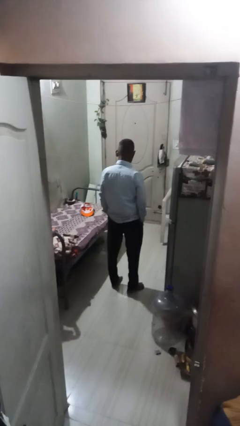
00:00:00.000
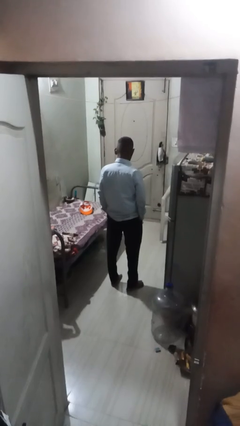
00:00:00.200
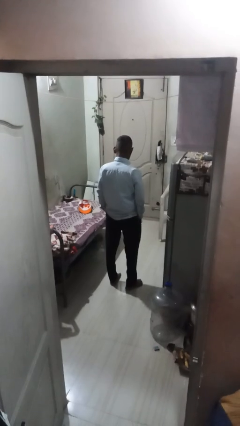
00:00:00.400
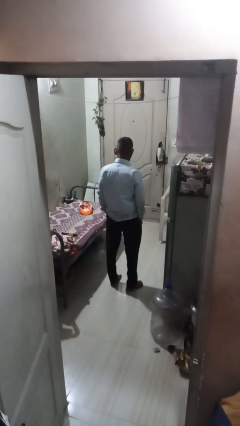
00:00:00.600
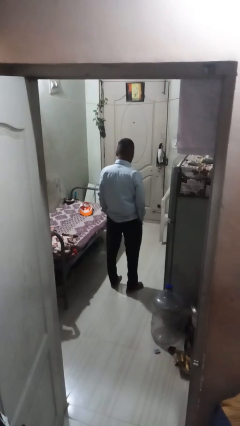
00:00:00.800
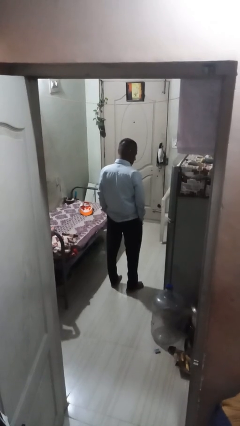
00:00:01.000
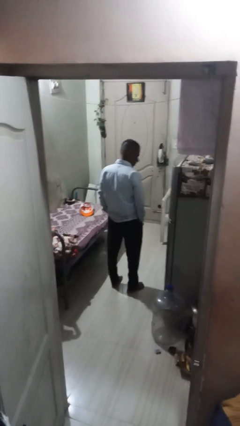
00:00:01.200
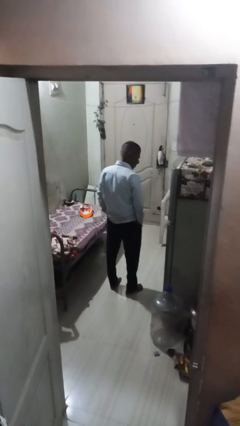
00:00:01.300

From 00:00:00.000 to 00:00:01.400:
person puts hands in back pockets

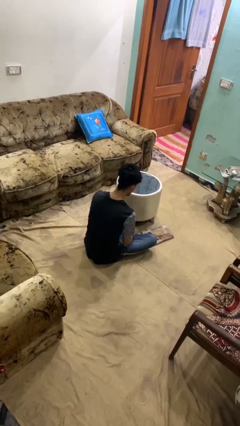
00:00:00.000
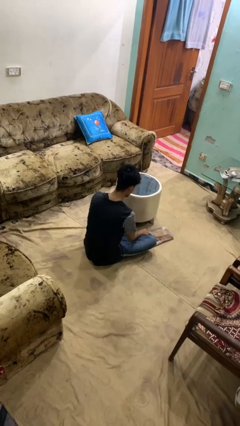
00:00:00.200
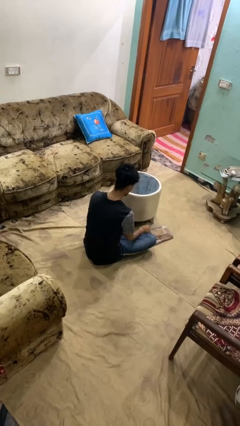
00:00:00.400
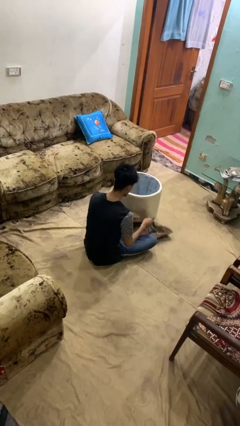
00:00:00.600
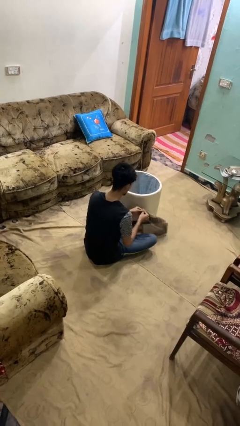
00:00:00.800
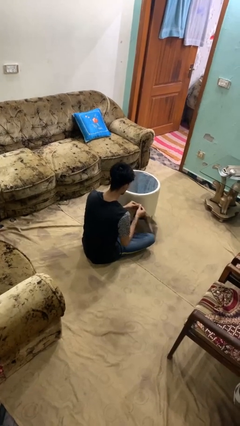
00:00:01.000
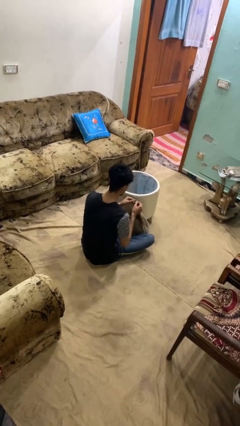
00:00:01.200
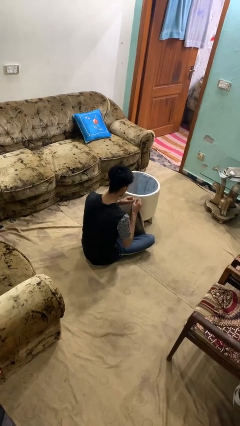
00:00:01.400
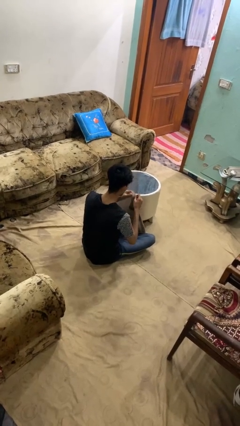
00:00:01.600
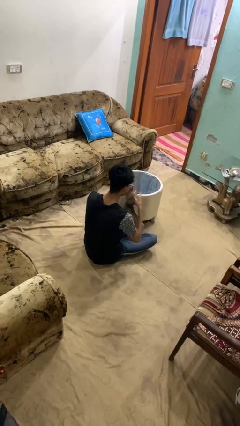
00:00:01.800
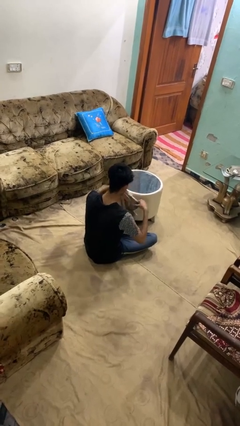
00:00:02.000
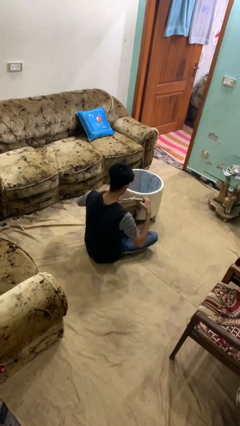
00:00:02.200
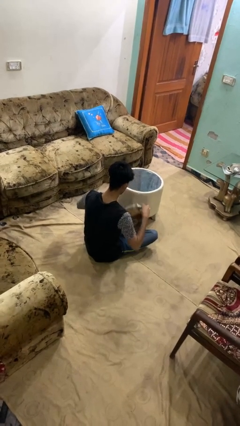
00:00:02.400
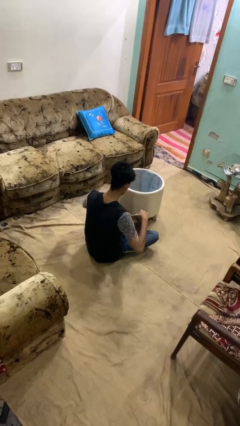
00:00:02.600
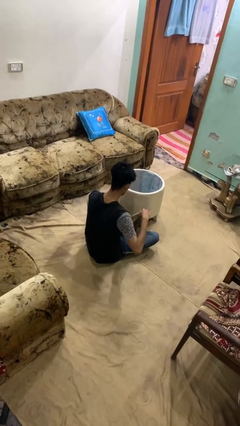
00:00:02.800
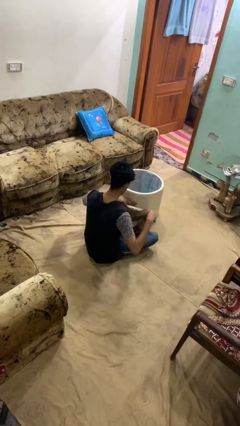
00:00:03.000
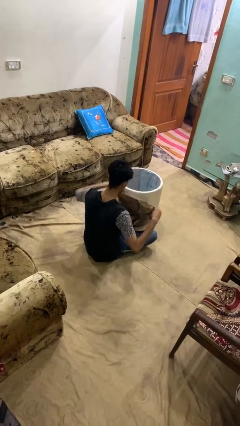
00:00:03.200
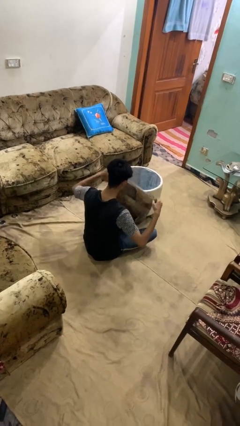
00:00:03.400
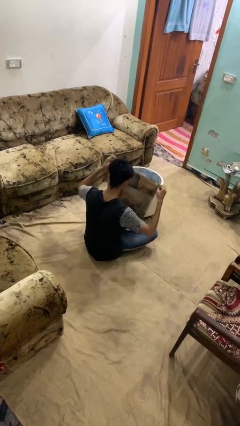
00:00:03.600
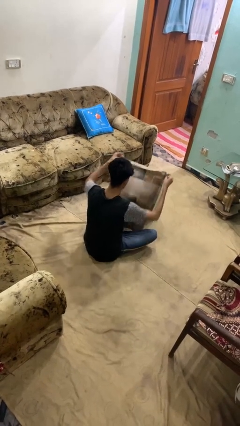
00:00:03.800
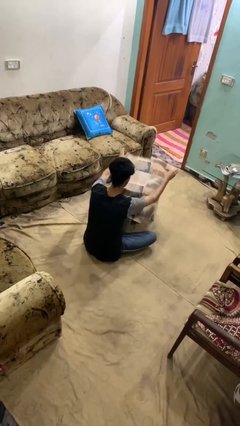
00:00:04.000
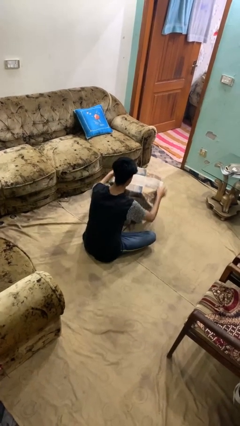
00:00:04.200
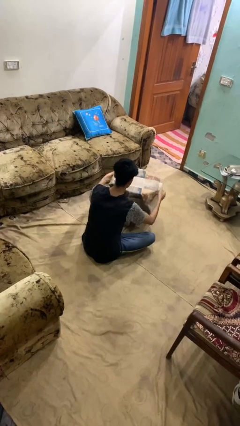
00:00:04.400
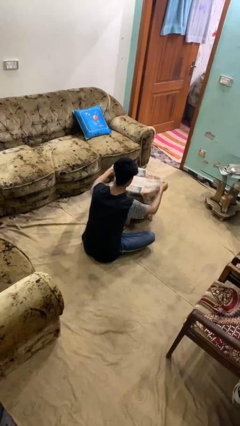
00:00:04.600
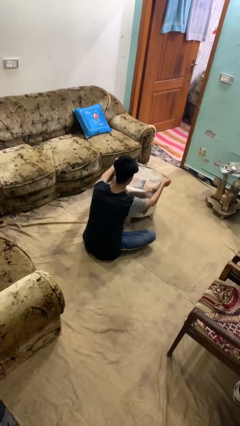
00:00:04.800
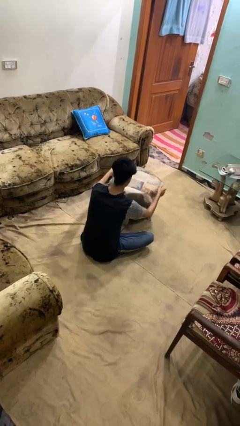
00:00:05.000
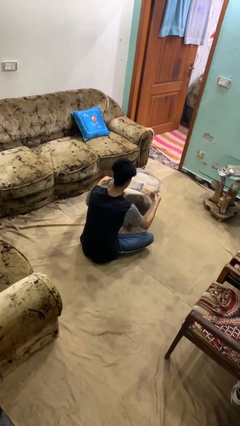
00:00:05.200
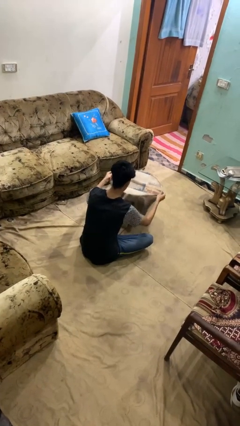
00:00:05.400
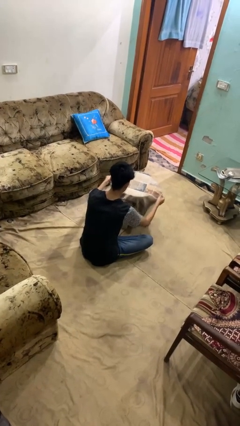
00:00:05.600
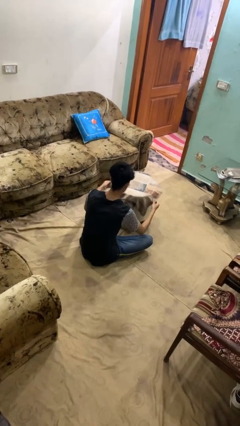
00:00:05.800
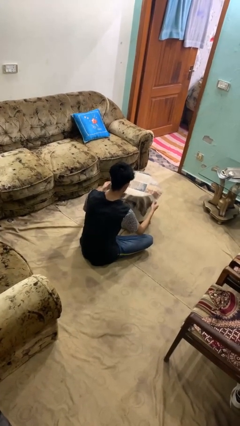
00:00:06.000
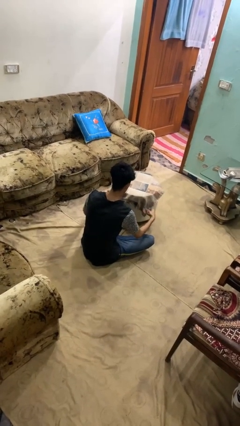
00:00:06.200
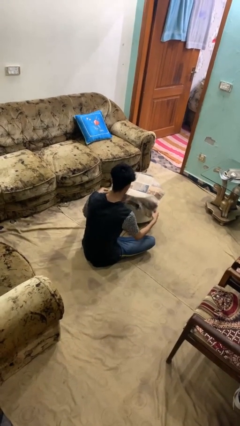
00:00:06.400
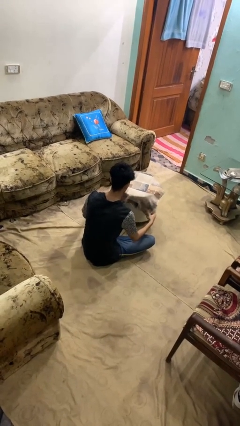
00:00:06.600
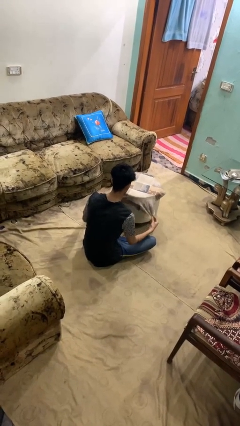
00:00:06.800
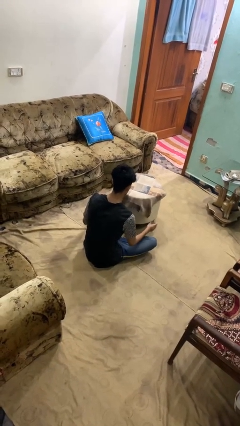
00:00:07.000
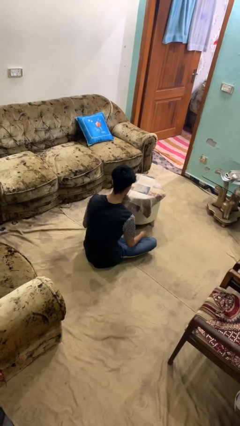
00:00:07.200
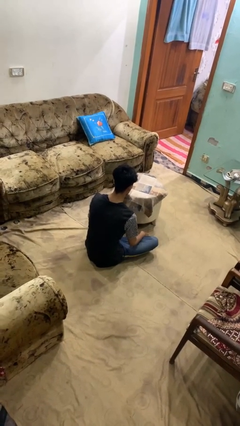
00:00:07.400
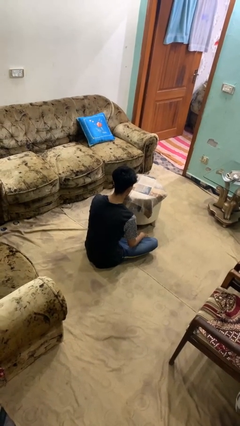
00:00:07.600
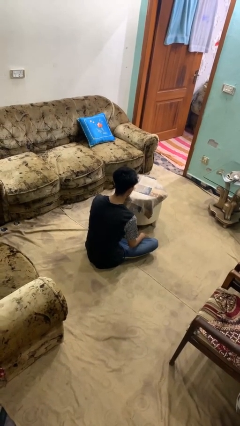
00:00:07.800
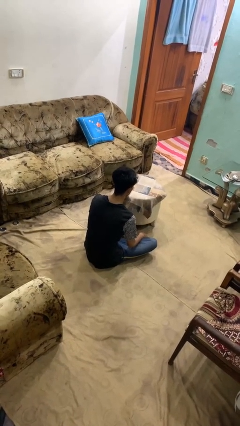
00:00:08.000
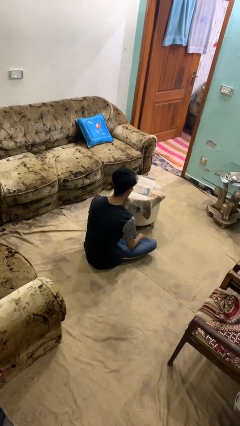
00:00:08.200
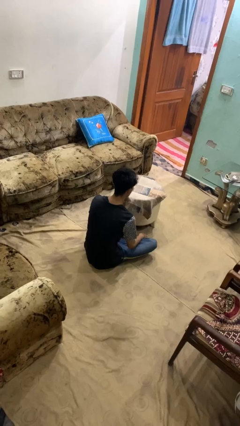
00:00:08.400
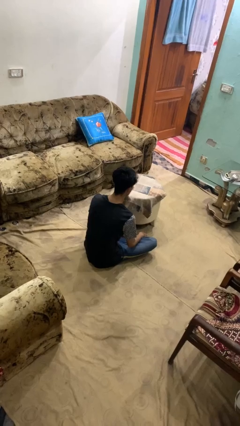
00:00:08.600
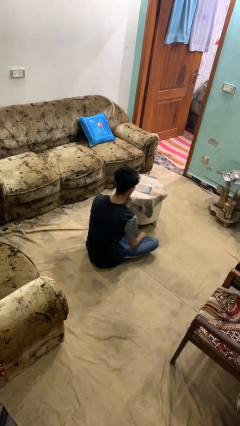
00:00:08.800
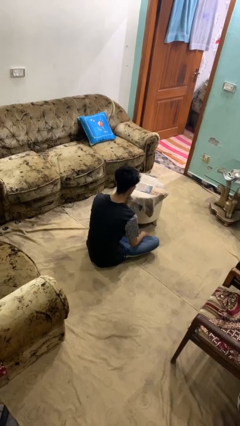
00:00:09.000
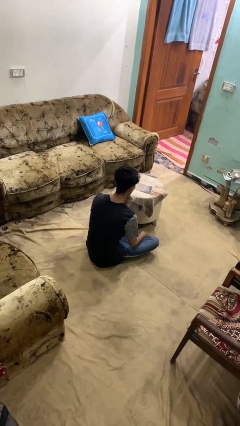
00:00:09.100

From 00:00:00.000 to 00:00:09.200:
person spreads tablecloth

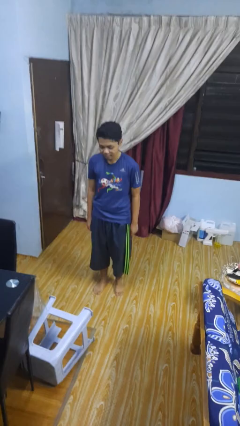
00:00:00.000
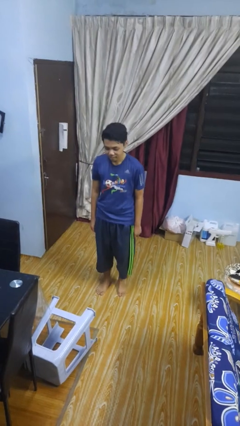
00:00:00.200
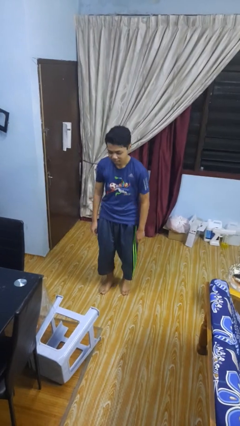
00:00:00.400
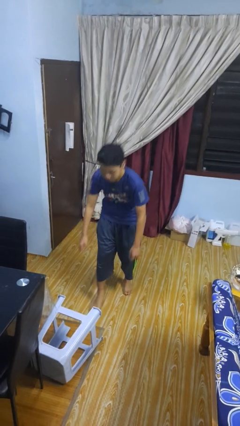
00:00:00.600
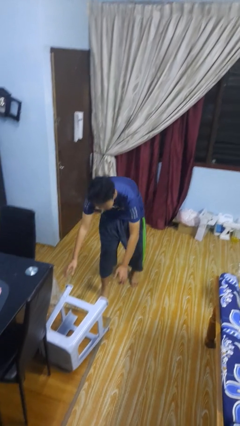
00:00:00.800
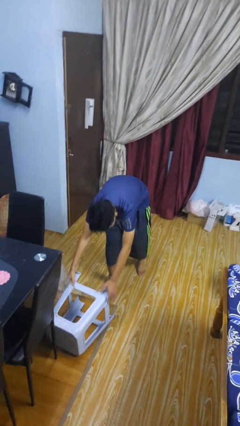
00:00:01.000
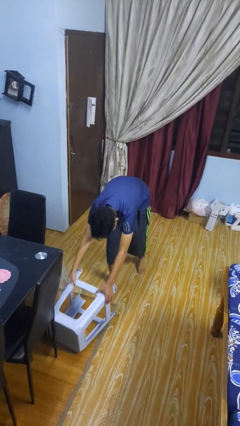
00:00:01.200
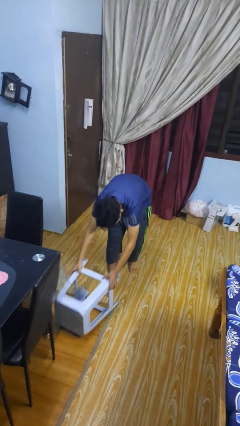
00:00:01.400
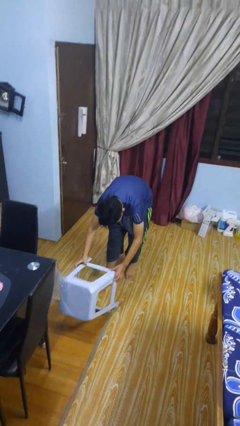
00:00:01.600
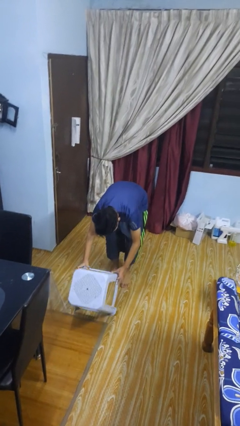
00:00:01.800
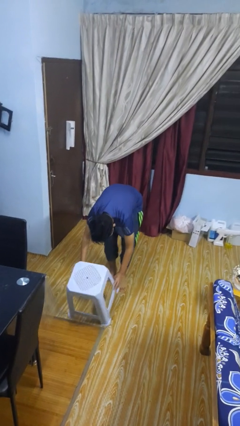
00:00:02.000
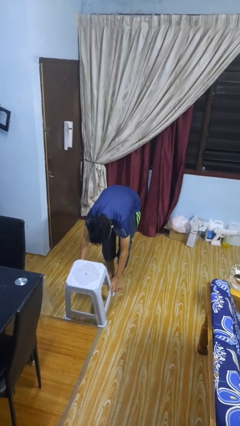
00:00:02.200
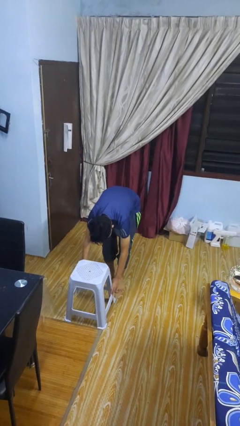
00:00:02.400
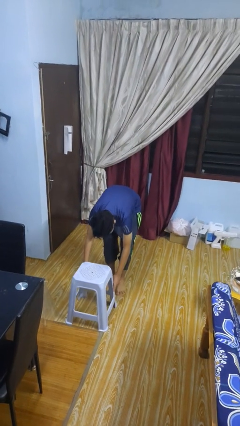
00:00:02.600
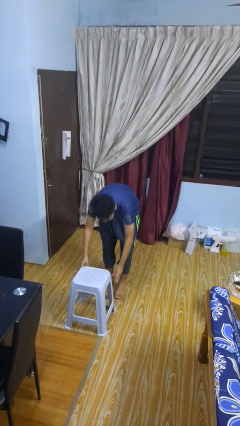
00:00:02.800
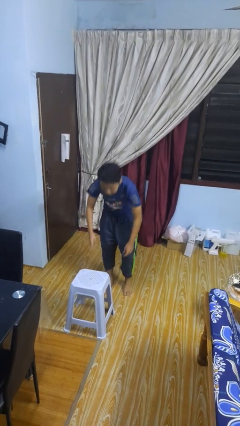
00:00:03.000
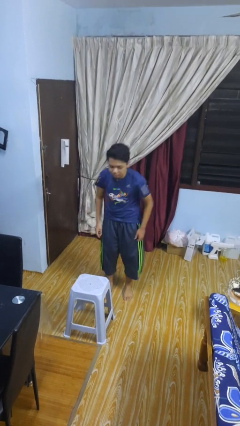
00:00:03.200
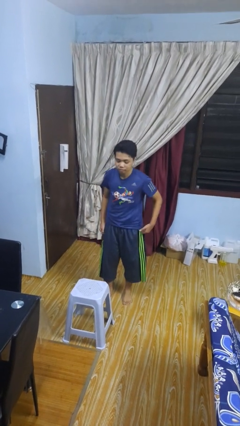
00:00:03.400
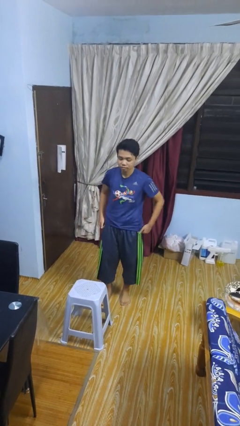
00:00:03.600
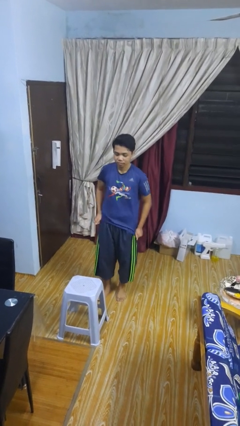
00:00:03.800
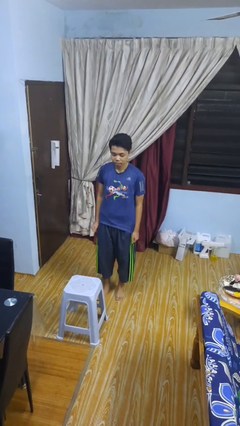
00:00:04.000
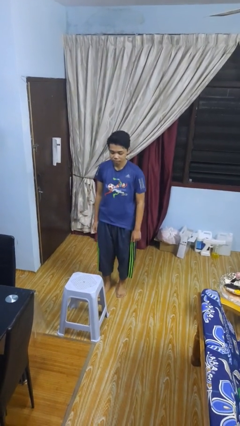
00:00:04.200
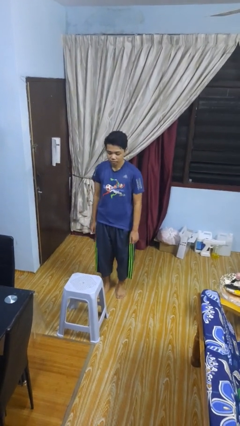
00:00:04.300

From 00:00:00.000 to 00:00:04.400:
person sets upright furniture

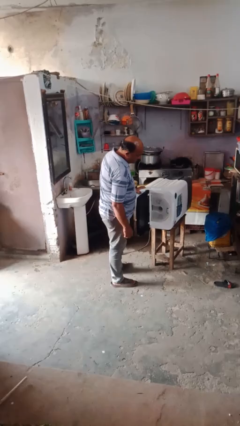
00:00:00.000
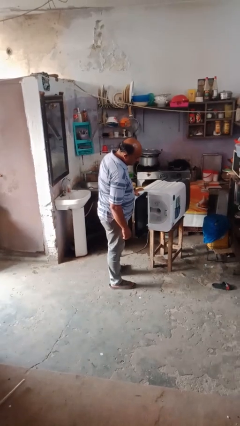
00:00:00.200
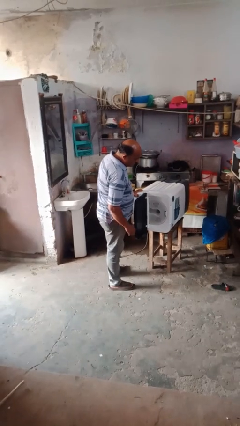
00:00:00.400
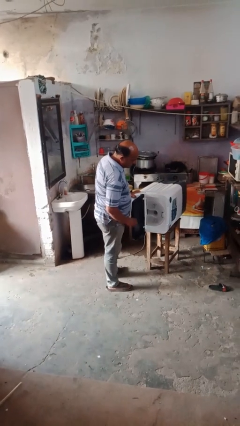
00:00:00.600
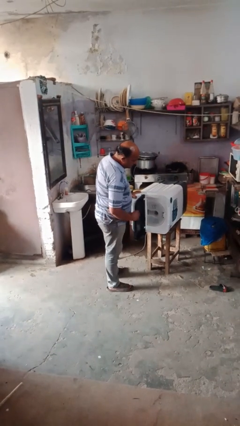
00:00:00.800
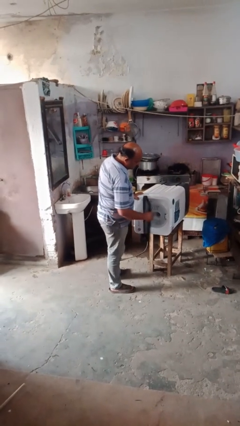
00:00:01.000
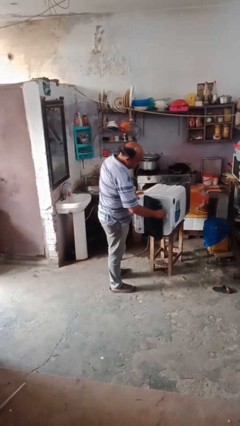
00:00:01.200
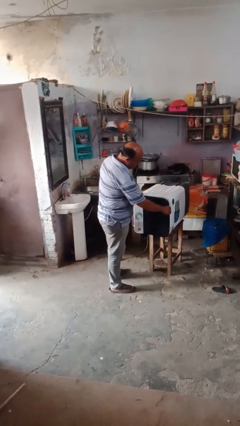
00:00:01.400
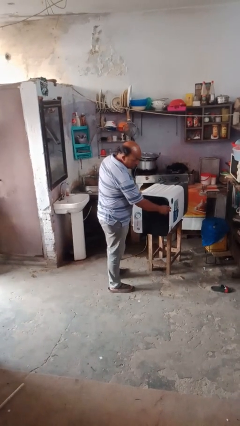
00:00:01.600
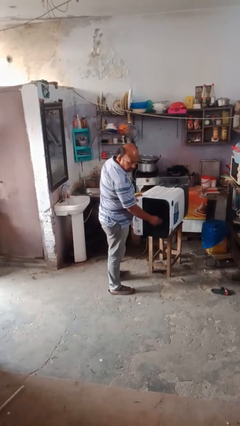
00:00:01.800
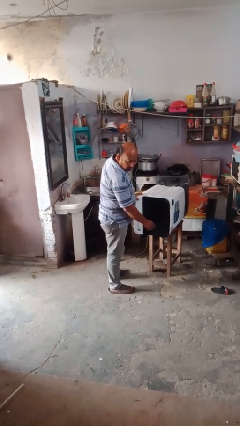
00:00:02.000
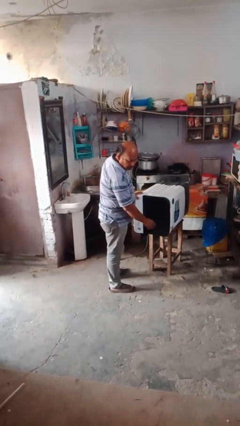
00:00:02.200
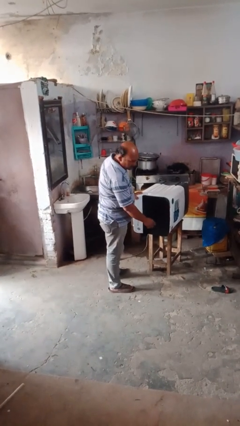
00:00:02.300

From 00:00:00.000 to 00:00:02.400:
person closes dishwasher

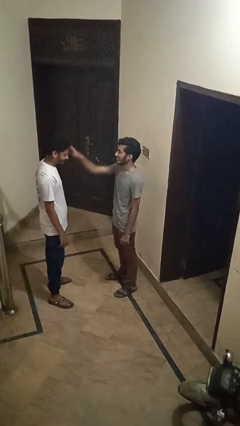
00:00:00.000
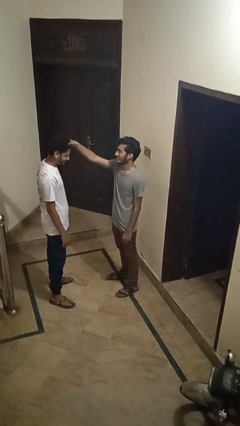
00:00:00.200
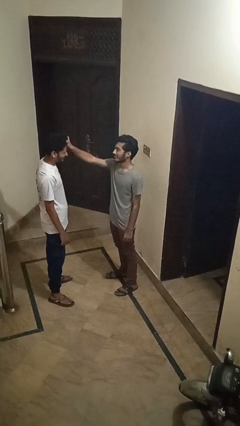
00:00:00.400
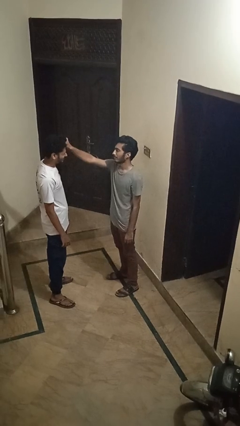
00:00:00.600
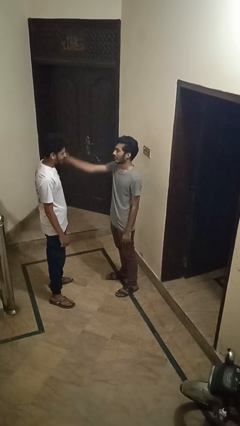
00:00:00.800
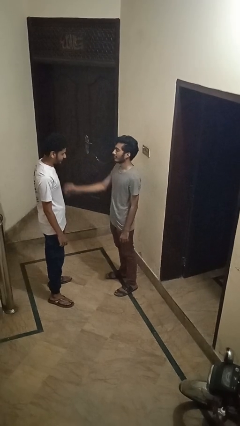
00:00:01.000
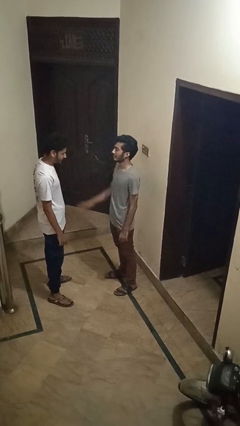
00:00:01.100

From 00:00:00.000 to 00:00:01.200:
person grabs person by hair
